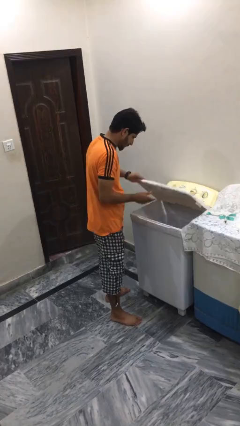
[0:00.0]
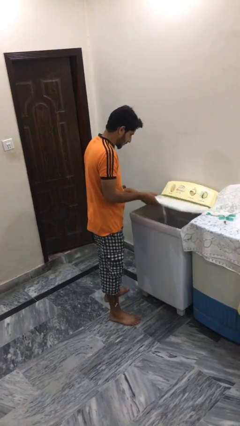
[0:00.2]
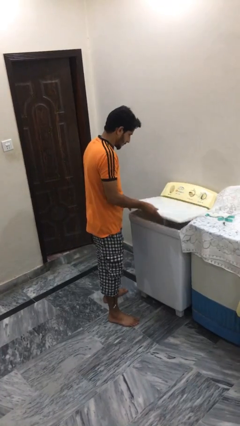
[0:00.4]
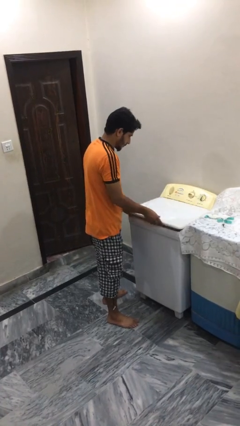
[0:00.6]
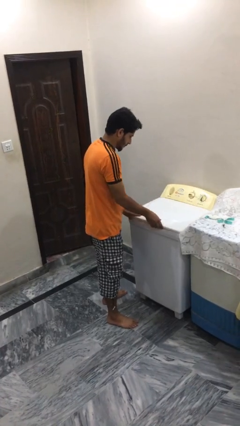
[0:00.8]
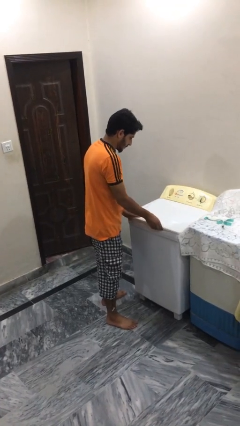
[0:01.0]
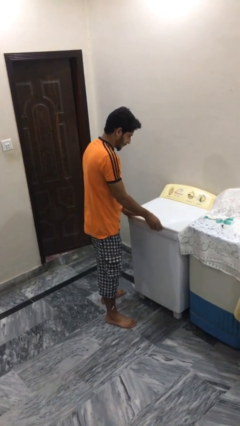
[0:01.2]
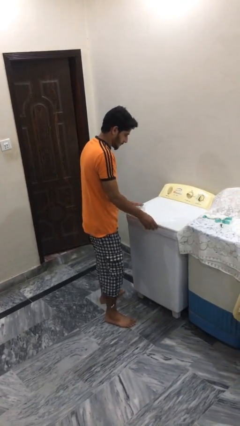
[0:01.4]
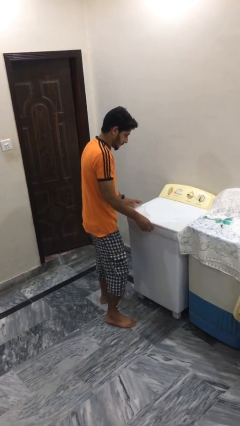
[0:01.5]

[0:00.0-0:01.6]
person closes clothes washer

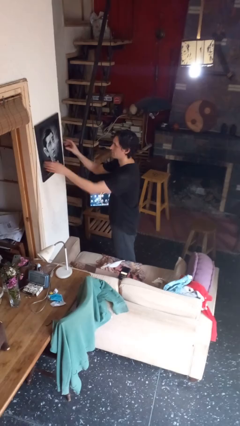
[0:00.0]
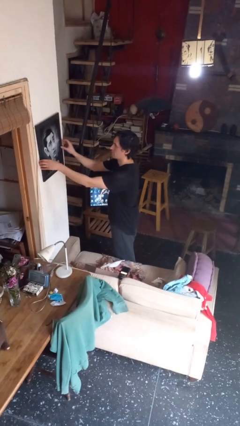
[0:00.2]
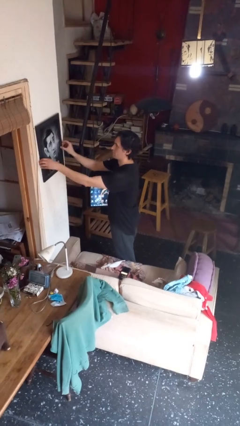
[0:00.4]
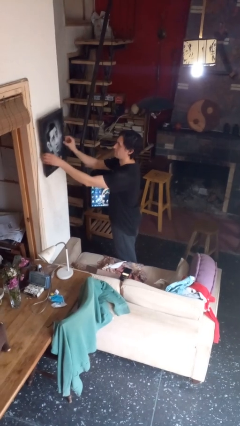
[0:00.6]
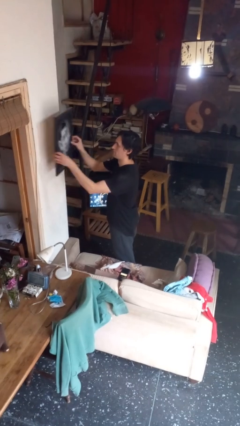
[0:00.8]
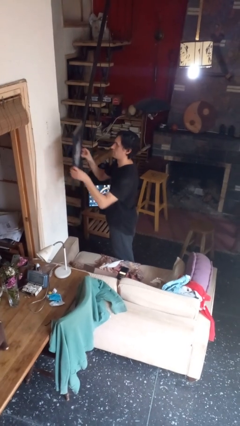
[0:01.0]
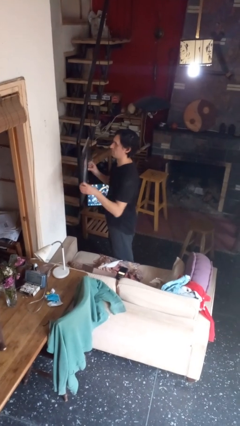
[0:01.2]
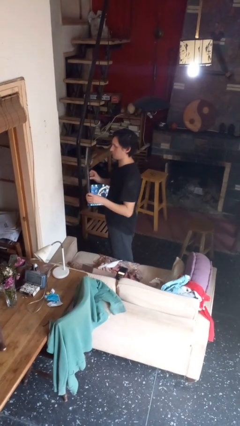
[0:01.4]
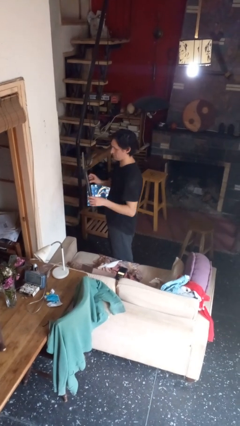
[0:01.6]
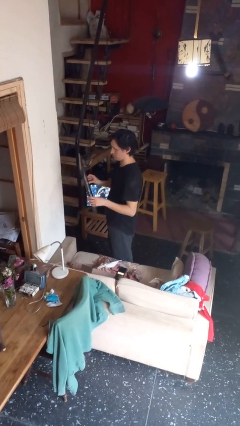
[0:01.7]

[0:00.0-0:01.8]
person takes down picture frame

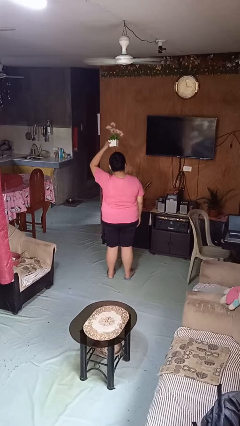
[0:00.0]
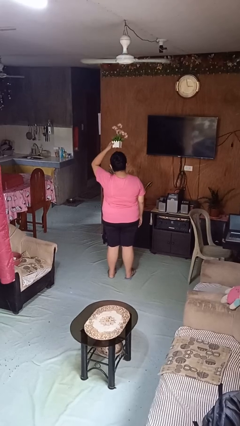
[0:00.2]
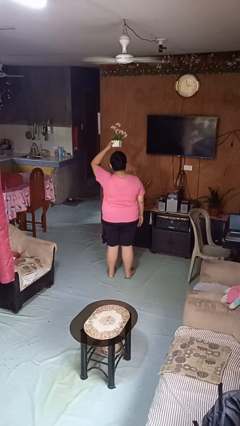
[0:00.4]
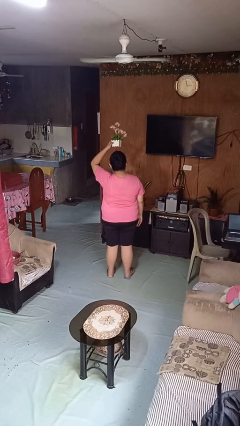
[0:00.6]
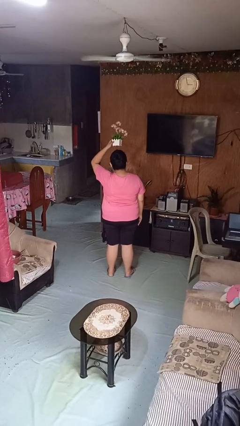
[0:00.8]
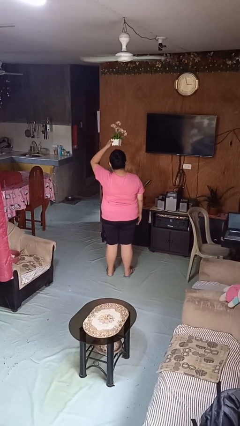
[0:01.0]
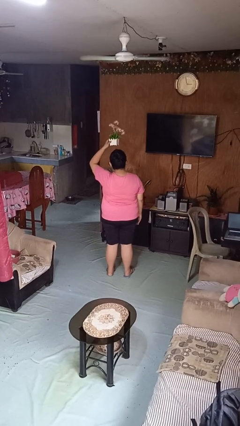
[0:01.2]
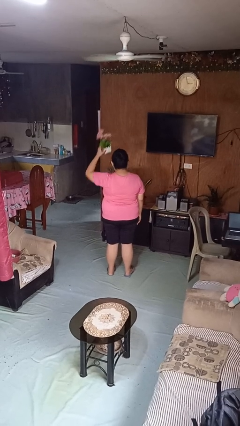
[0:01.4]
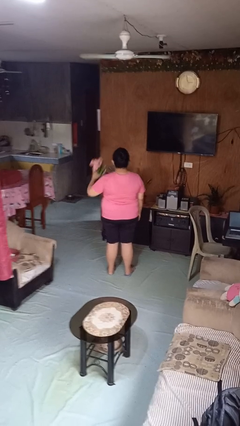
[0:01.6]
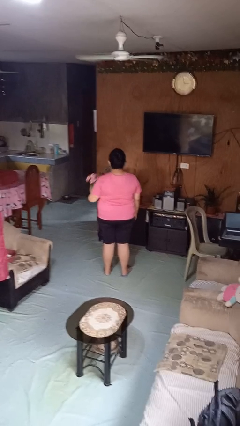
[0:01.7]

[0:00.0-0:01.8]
person holds object above head

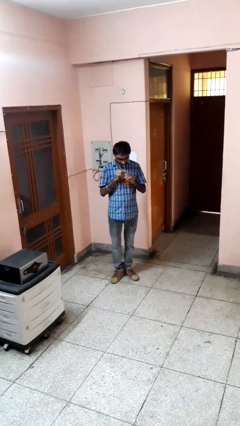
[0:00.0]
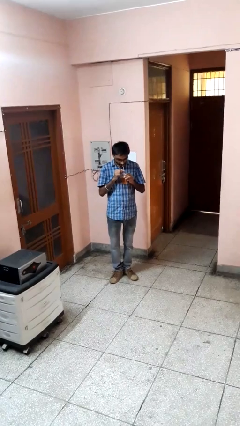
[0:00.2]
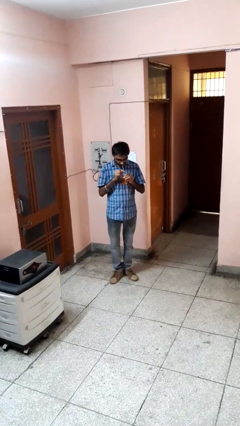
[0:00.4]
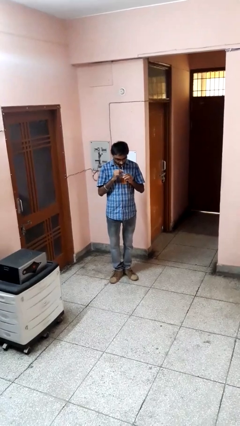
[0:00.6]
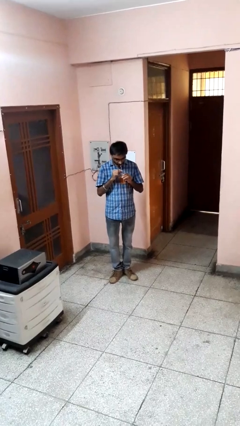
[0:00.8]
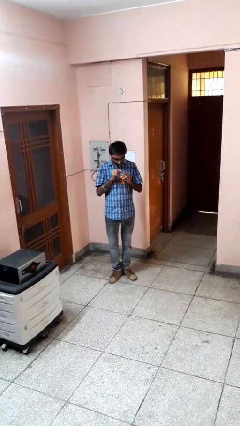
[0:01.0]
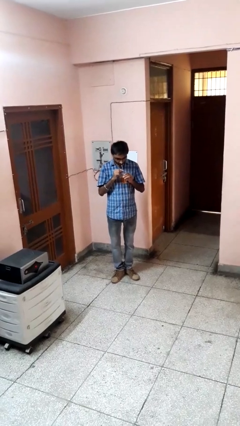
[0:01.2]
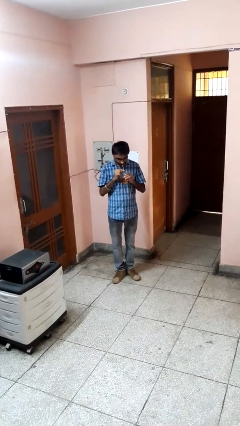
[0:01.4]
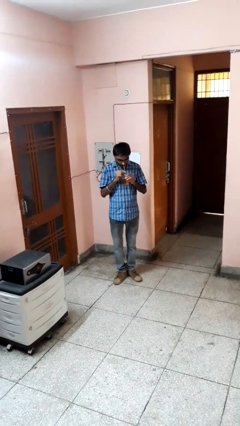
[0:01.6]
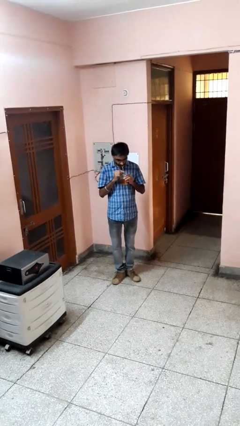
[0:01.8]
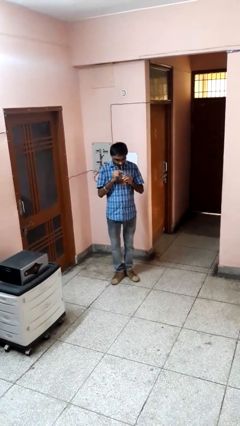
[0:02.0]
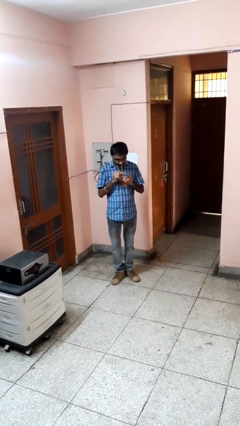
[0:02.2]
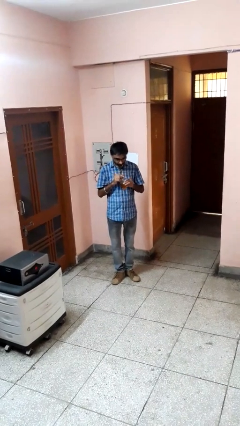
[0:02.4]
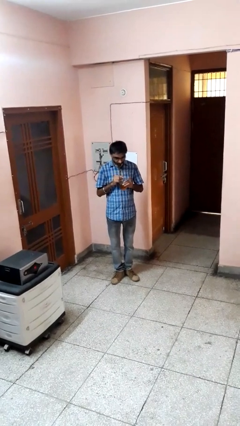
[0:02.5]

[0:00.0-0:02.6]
person drinks from straw

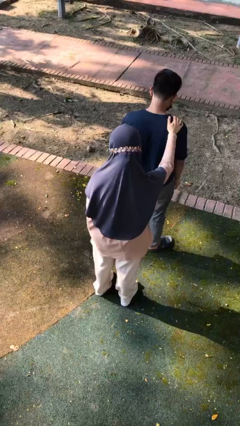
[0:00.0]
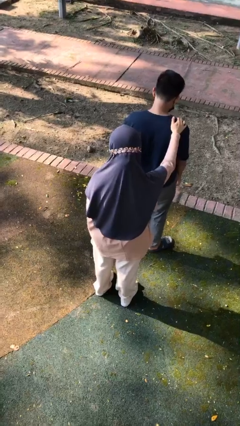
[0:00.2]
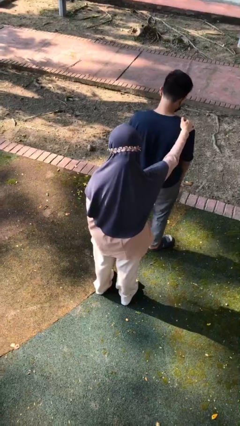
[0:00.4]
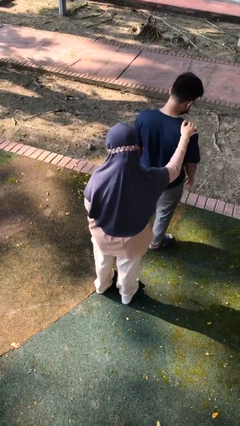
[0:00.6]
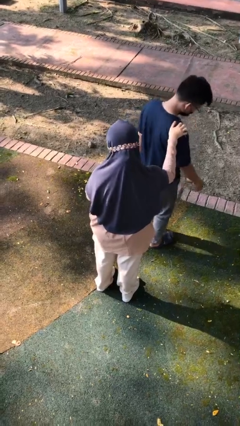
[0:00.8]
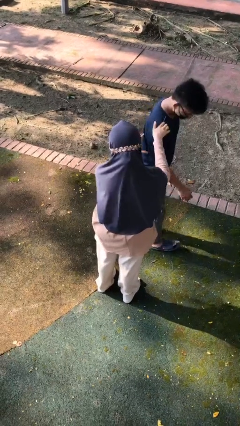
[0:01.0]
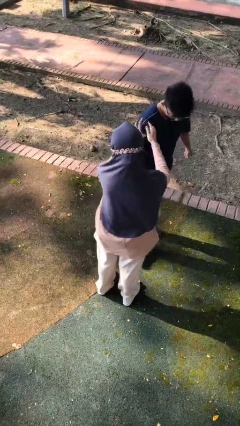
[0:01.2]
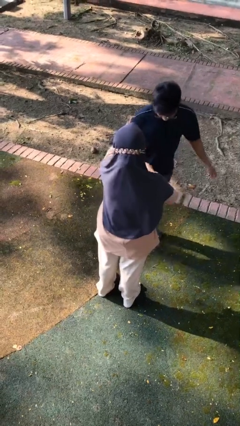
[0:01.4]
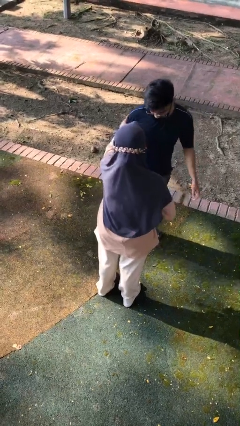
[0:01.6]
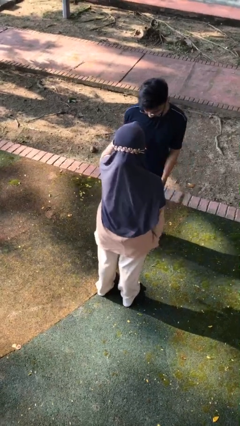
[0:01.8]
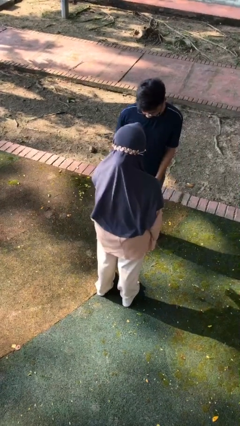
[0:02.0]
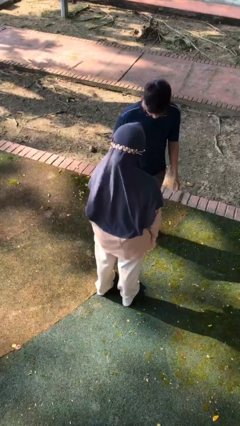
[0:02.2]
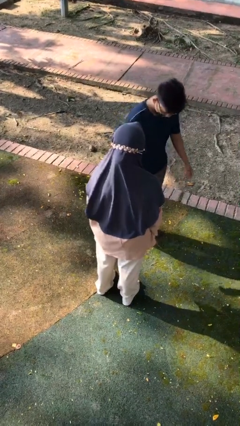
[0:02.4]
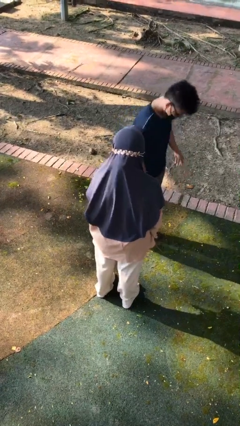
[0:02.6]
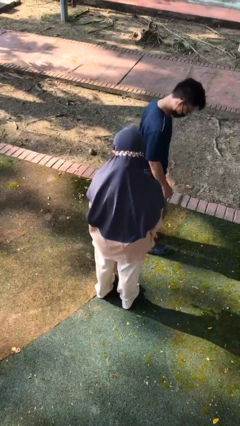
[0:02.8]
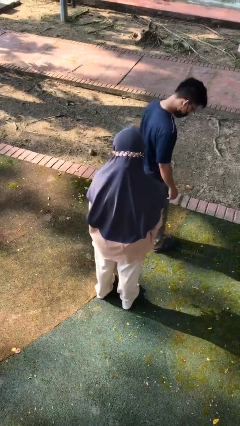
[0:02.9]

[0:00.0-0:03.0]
person spins person around

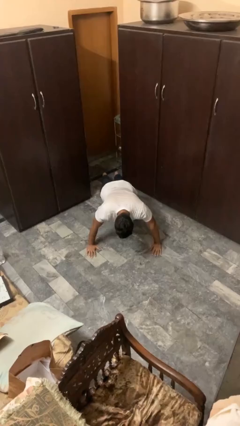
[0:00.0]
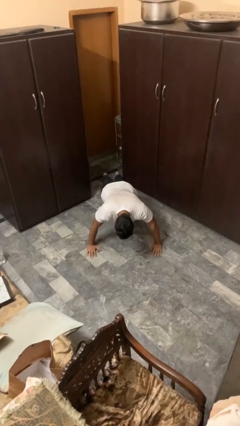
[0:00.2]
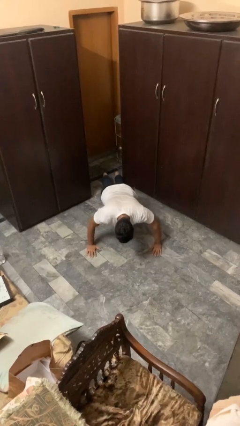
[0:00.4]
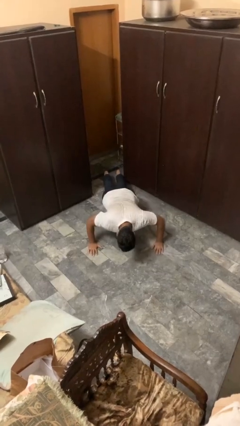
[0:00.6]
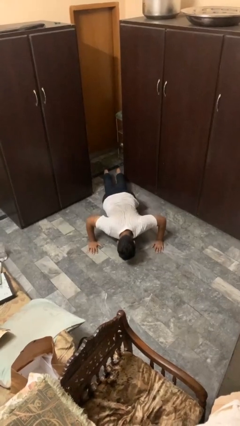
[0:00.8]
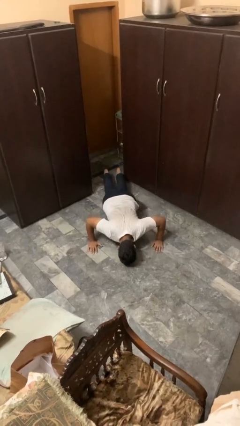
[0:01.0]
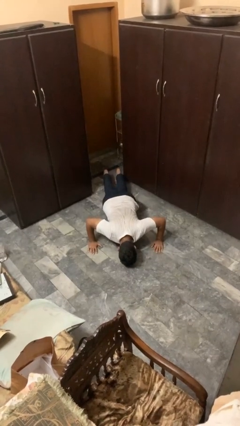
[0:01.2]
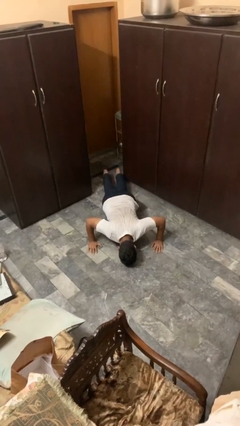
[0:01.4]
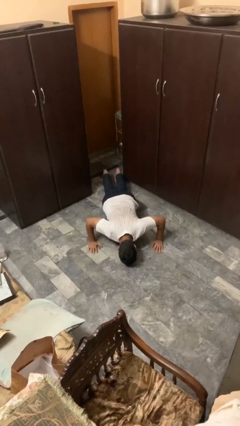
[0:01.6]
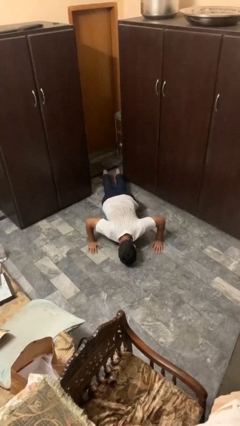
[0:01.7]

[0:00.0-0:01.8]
person exercises with pushup

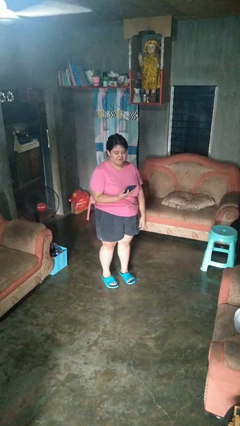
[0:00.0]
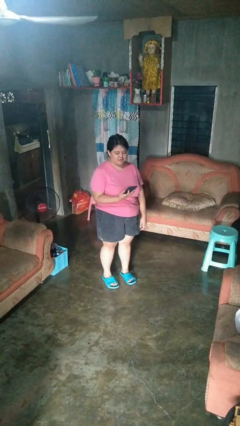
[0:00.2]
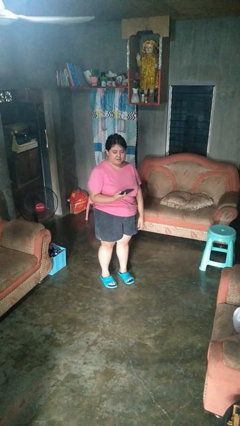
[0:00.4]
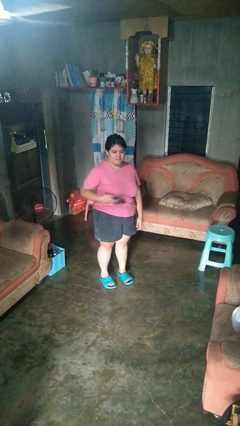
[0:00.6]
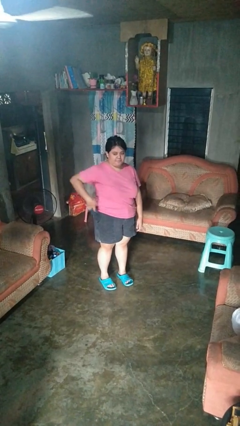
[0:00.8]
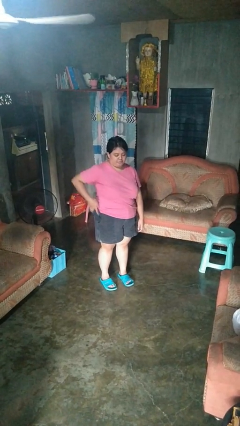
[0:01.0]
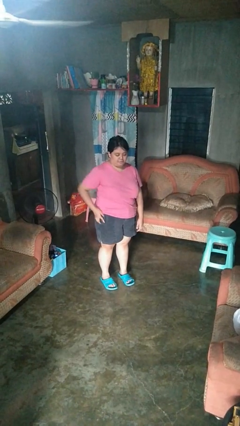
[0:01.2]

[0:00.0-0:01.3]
person puts phone into pocket

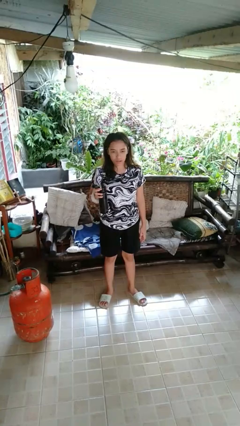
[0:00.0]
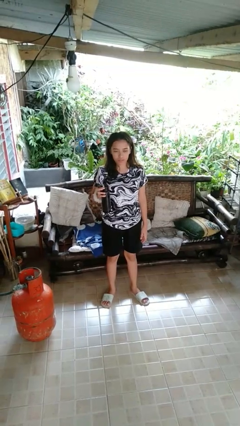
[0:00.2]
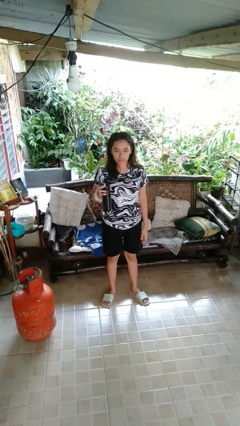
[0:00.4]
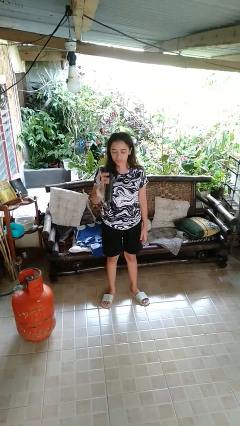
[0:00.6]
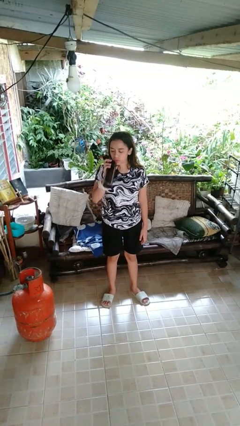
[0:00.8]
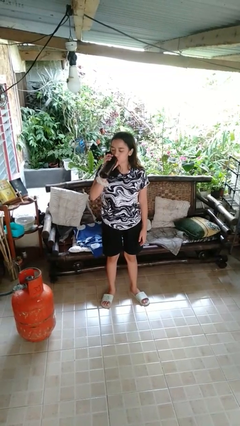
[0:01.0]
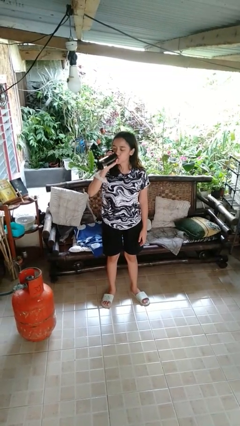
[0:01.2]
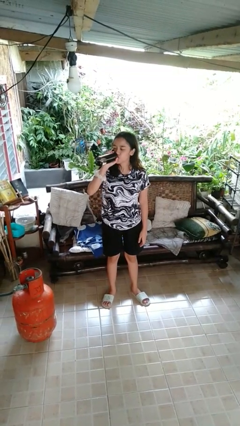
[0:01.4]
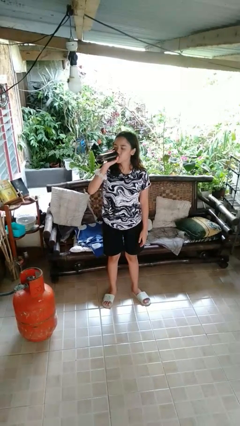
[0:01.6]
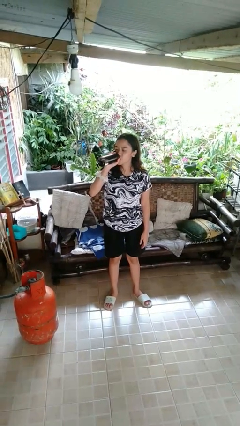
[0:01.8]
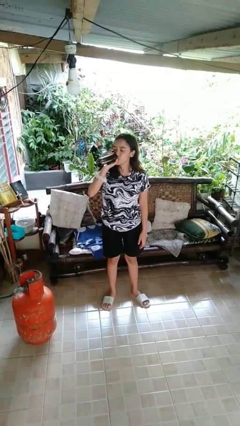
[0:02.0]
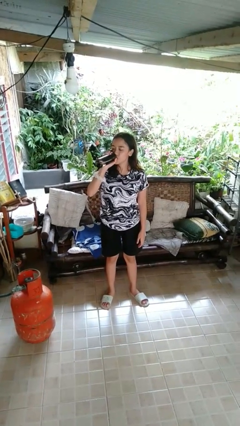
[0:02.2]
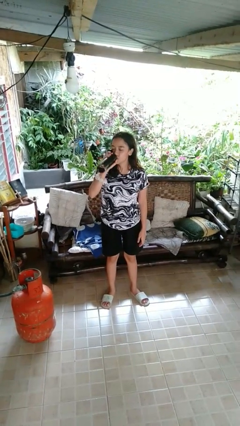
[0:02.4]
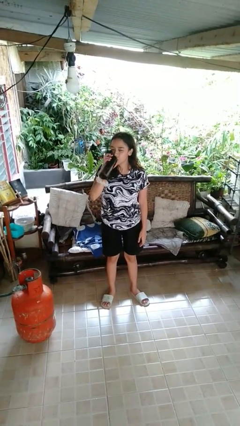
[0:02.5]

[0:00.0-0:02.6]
person drinks from bottle

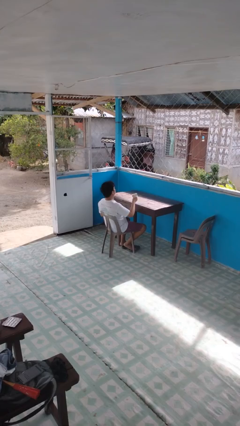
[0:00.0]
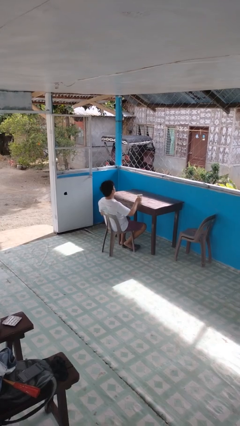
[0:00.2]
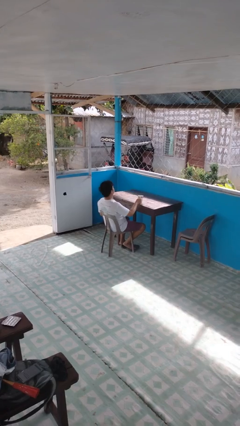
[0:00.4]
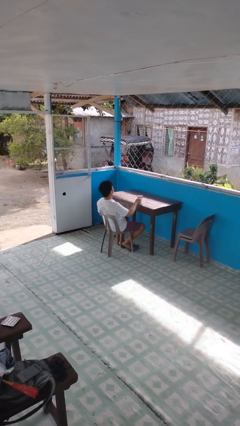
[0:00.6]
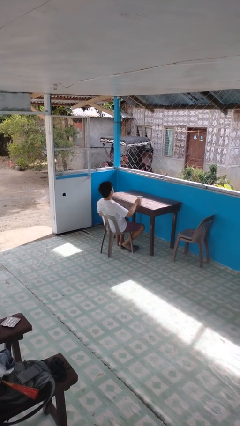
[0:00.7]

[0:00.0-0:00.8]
person puts down object on table
